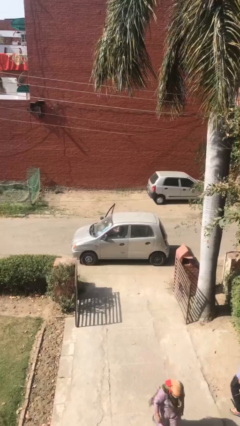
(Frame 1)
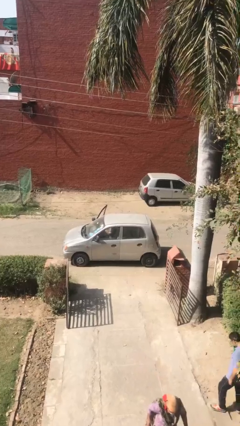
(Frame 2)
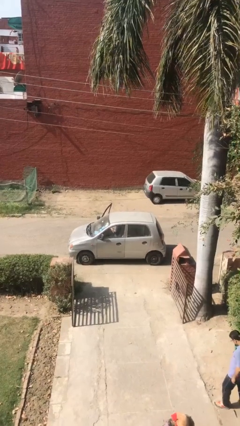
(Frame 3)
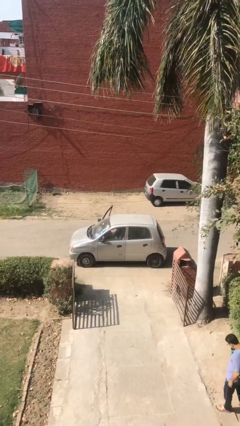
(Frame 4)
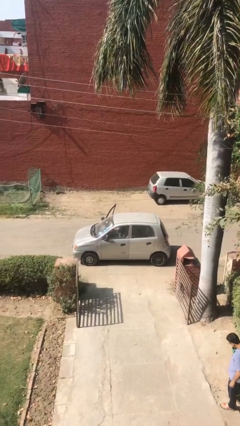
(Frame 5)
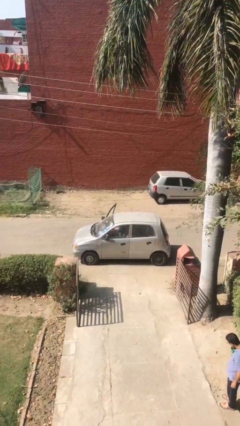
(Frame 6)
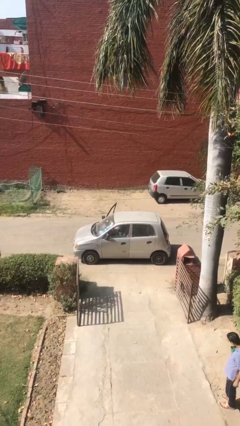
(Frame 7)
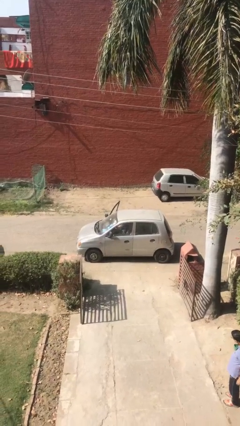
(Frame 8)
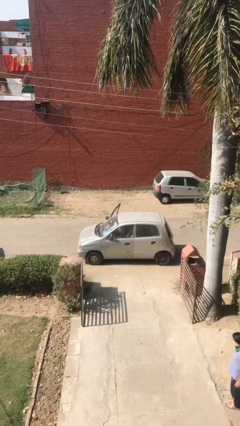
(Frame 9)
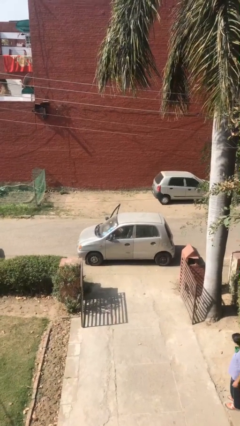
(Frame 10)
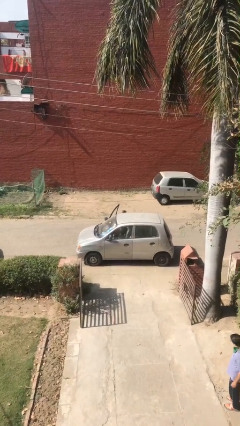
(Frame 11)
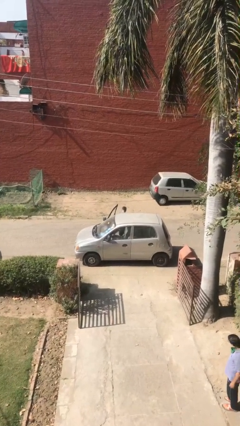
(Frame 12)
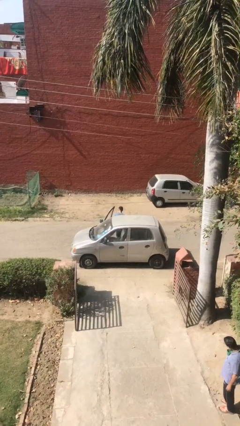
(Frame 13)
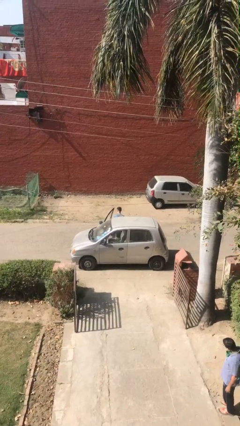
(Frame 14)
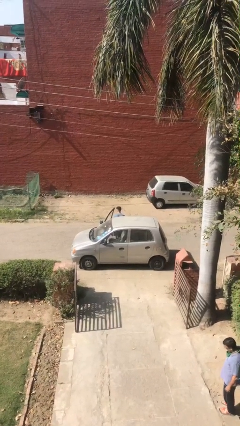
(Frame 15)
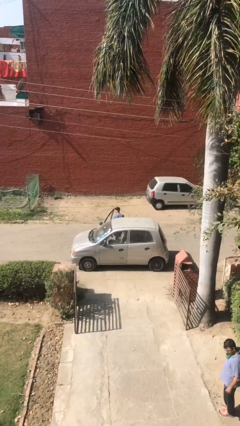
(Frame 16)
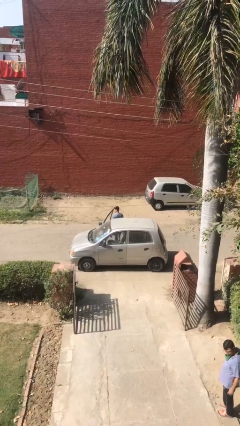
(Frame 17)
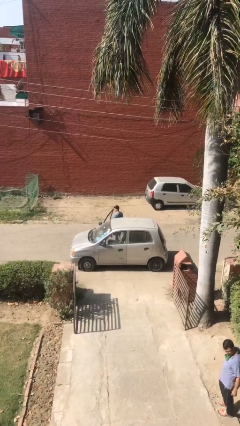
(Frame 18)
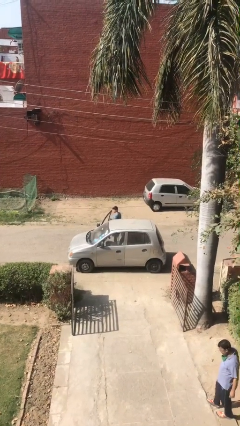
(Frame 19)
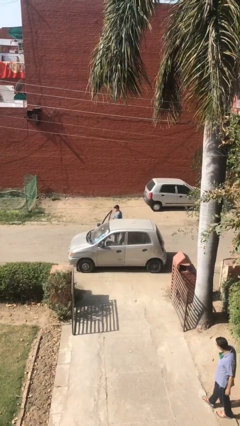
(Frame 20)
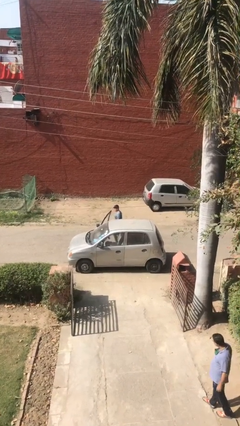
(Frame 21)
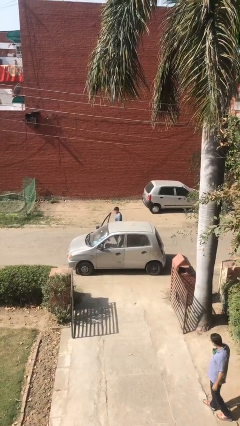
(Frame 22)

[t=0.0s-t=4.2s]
person exits car

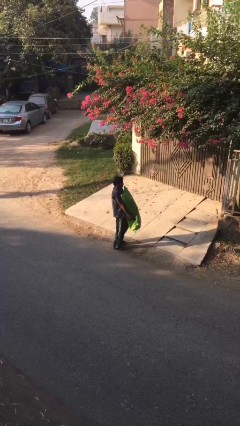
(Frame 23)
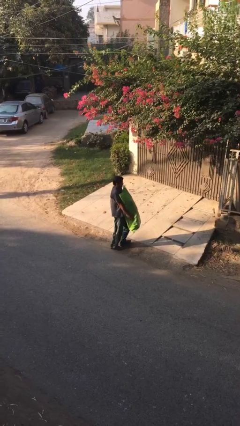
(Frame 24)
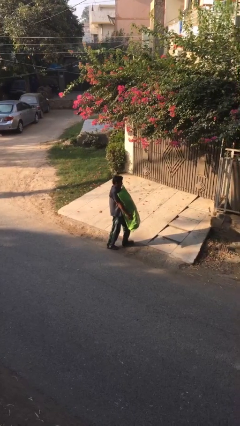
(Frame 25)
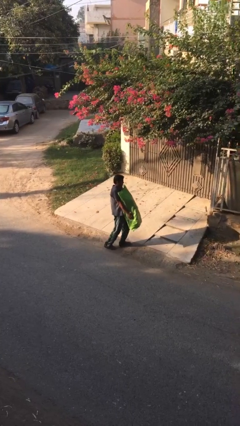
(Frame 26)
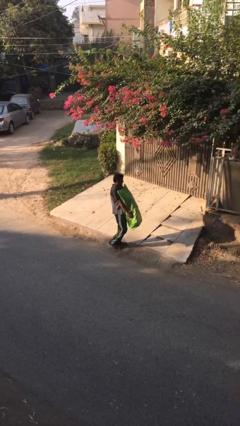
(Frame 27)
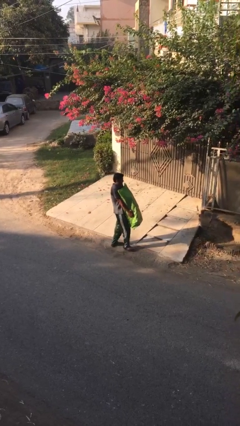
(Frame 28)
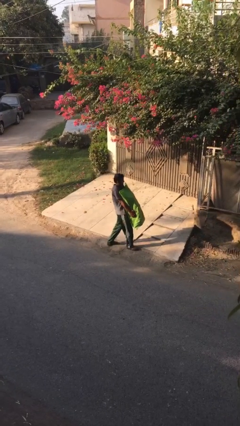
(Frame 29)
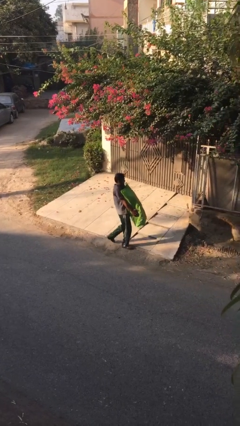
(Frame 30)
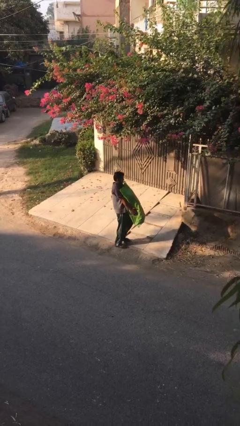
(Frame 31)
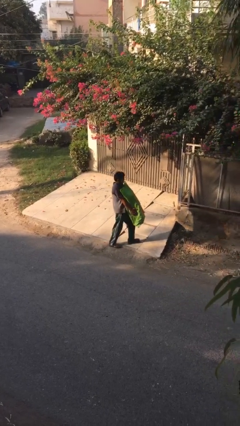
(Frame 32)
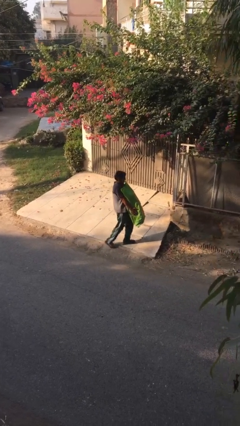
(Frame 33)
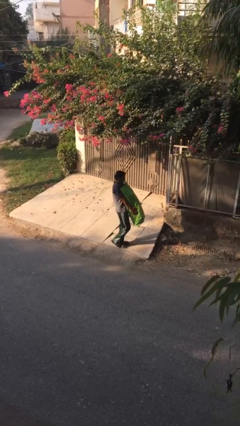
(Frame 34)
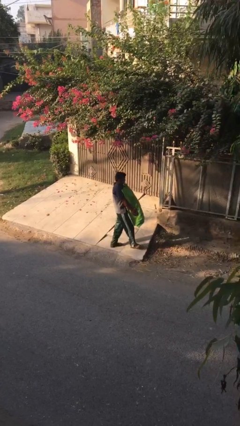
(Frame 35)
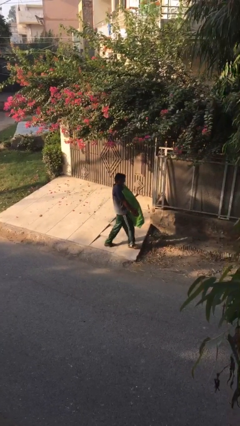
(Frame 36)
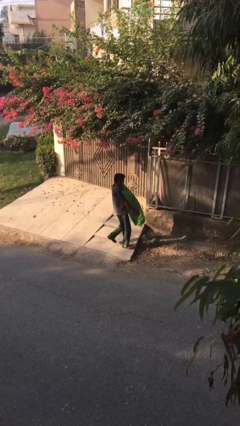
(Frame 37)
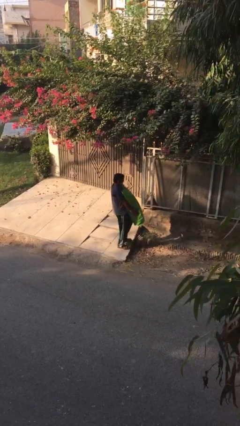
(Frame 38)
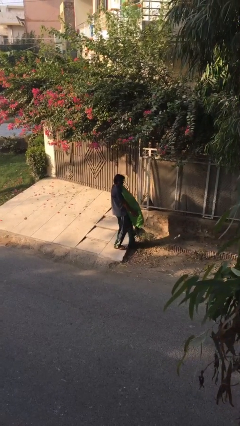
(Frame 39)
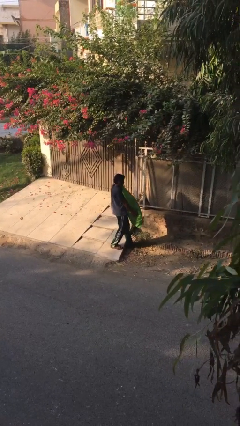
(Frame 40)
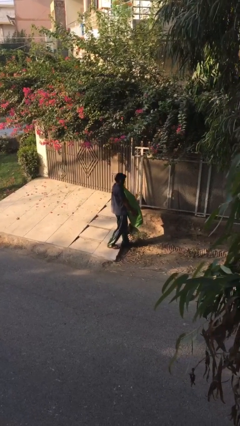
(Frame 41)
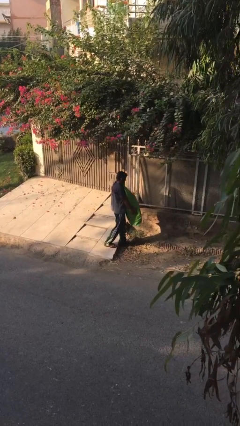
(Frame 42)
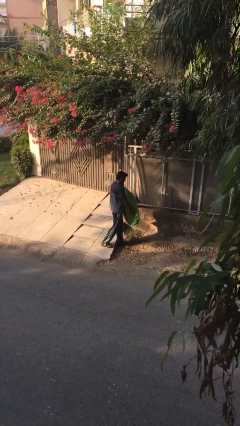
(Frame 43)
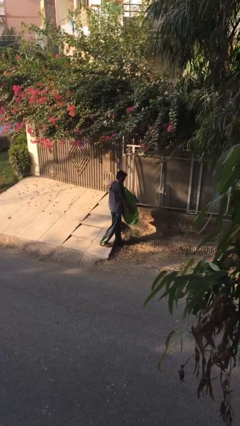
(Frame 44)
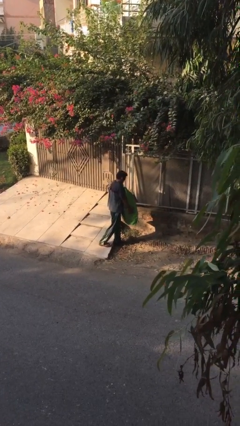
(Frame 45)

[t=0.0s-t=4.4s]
person carries heavy object

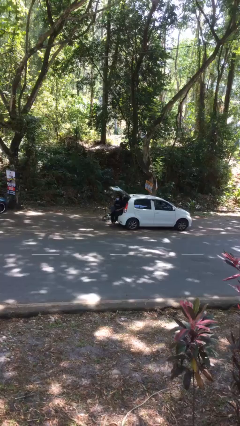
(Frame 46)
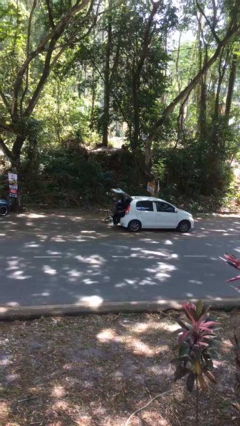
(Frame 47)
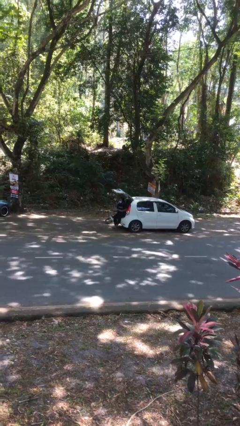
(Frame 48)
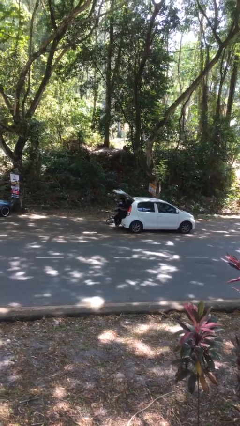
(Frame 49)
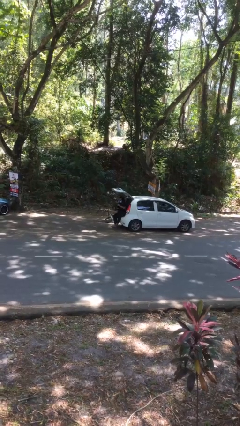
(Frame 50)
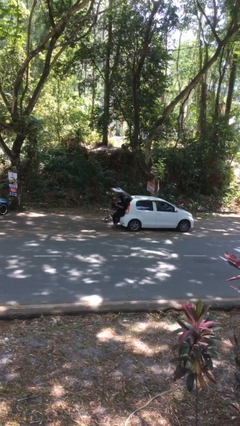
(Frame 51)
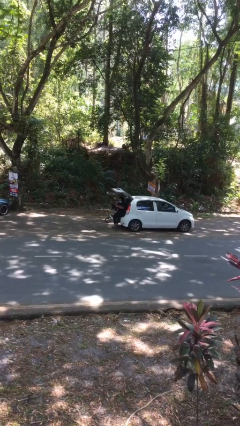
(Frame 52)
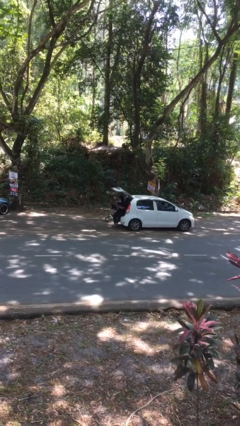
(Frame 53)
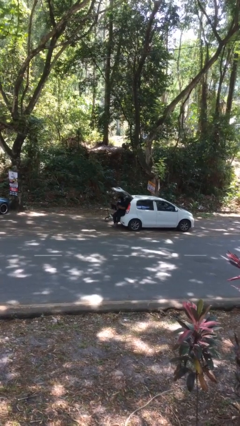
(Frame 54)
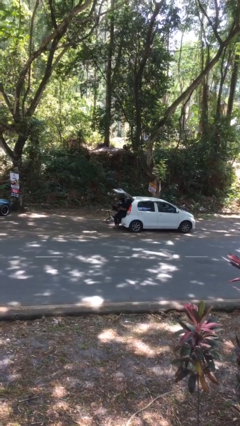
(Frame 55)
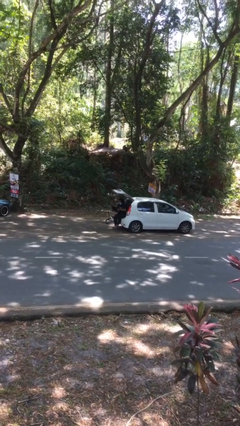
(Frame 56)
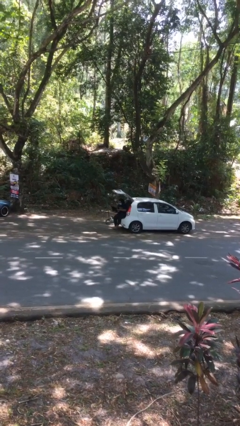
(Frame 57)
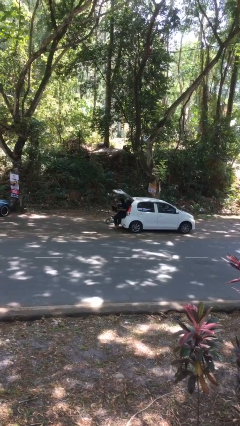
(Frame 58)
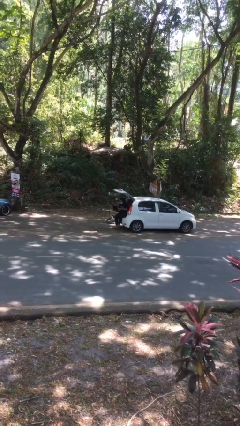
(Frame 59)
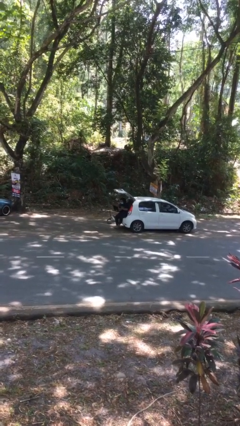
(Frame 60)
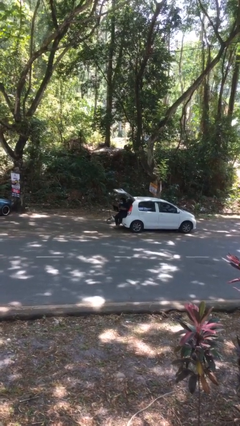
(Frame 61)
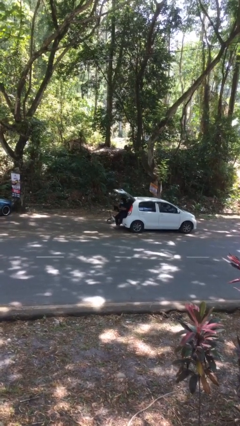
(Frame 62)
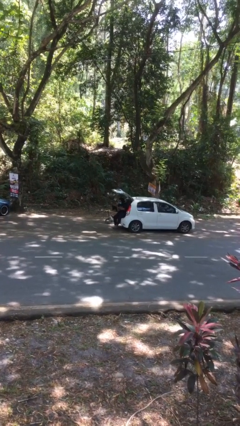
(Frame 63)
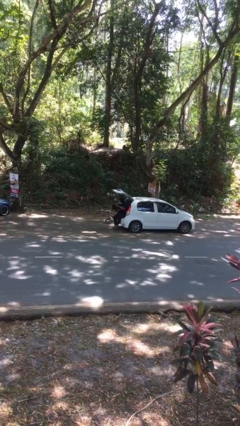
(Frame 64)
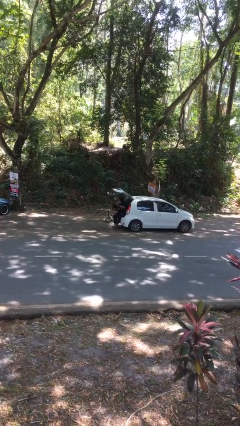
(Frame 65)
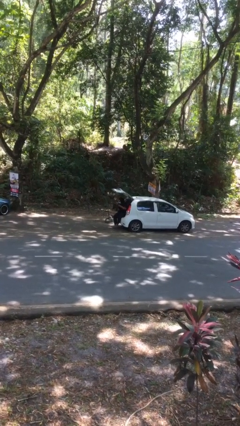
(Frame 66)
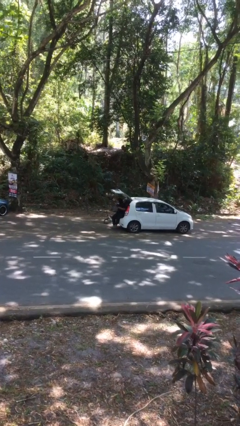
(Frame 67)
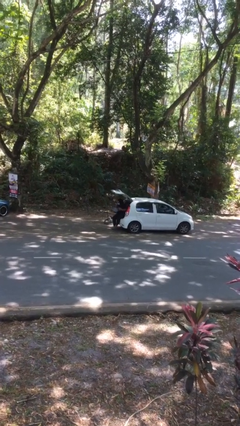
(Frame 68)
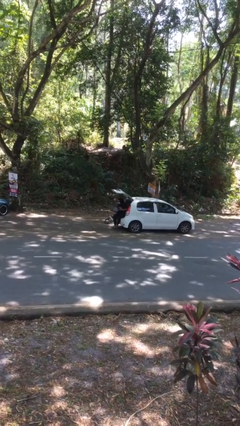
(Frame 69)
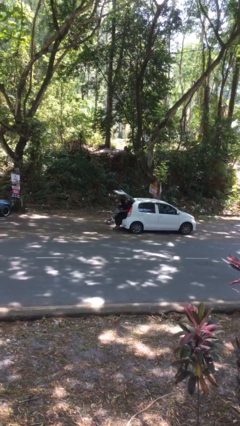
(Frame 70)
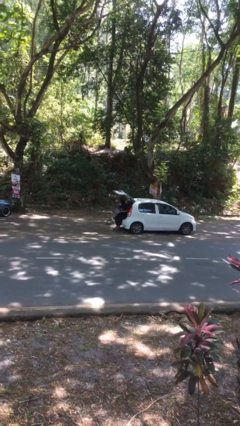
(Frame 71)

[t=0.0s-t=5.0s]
person interacts with laptop

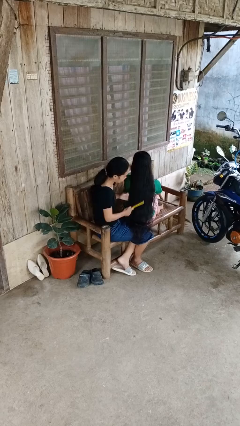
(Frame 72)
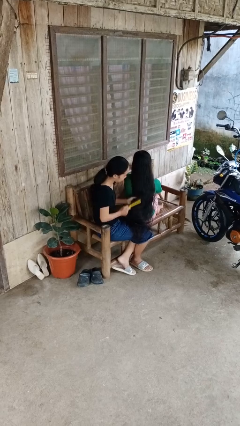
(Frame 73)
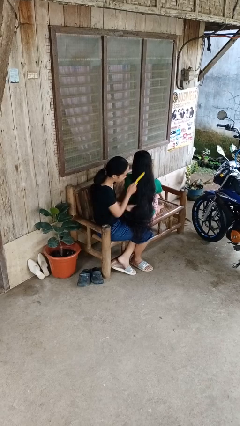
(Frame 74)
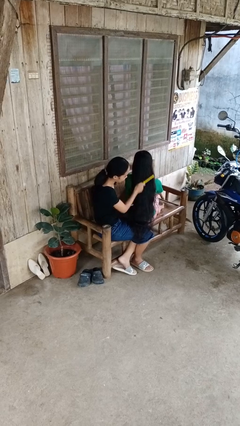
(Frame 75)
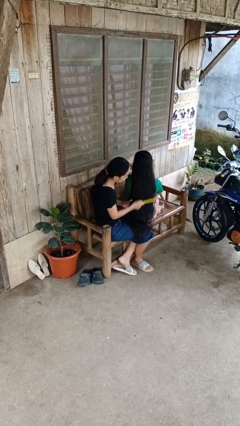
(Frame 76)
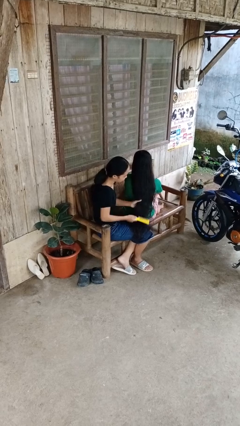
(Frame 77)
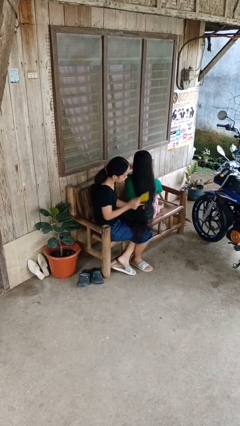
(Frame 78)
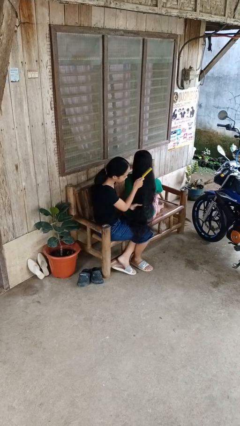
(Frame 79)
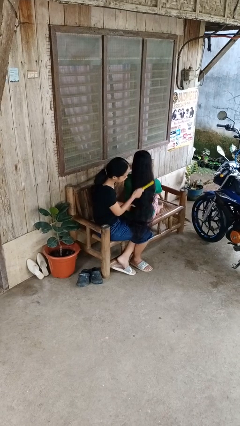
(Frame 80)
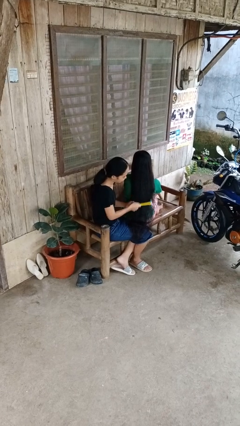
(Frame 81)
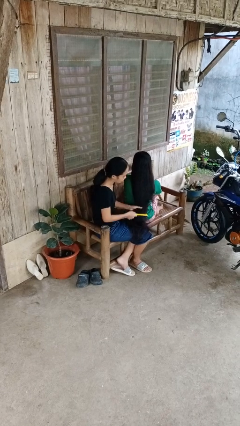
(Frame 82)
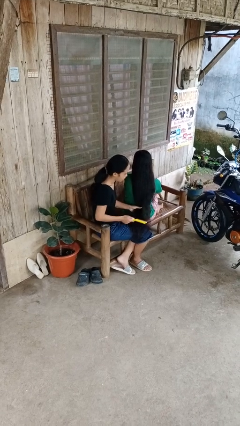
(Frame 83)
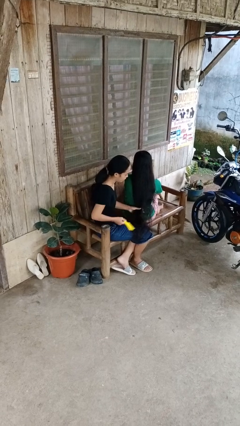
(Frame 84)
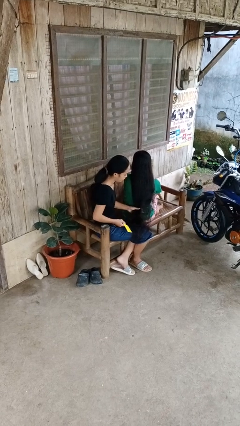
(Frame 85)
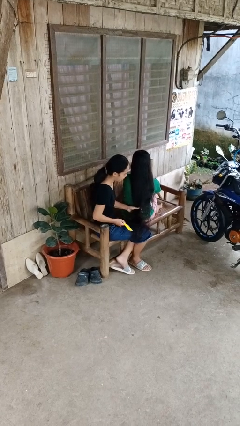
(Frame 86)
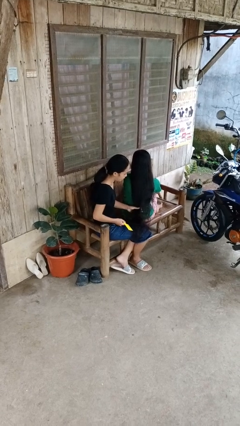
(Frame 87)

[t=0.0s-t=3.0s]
person brushes hair of person

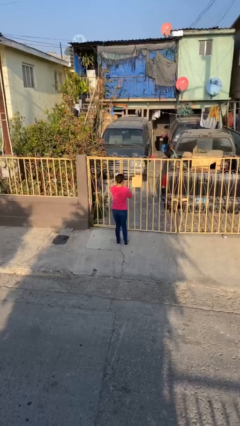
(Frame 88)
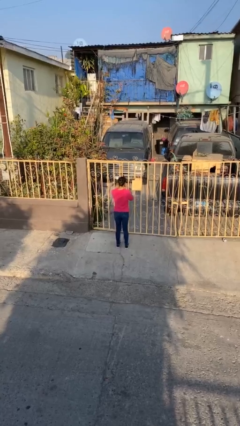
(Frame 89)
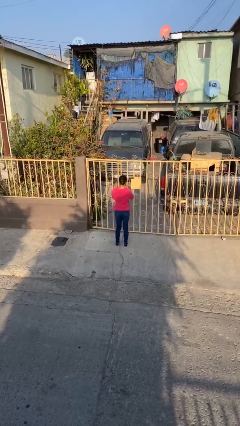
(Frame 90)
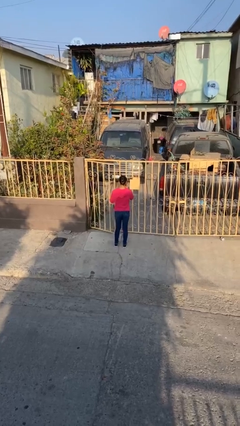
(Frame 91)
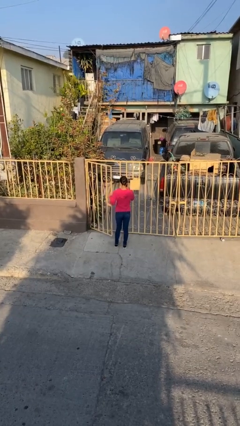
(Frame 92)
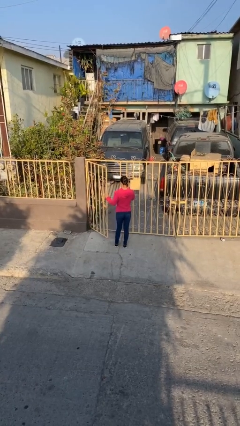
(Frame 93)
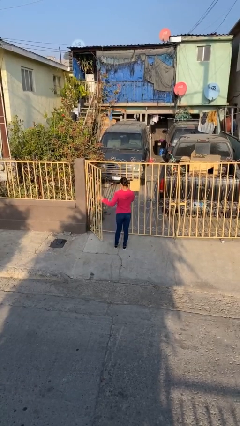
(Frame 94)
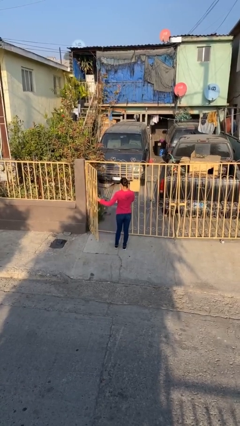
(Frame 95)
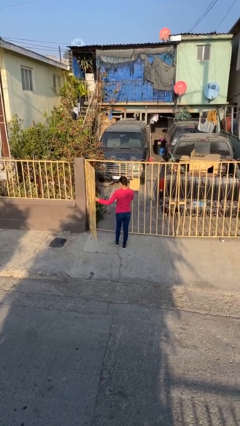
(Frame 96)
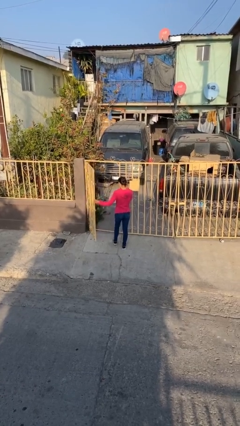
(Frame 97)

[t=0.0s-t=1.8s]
person opens facility door
